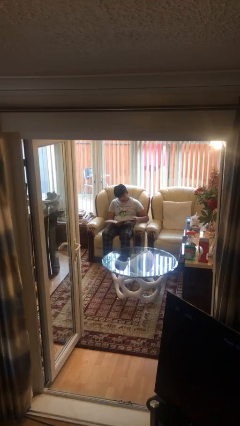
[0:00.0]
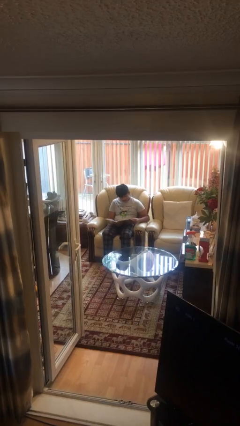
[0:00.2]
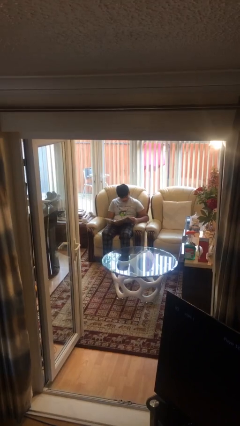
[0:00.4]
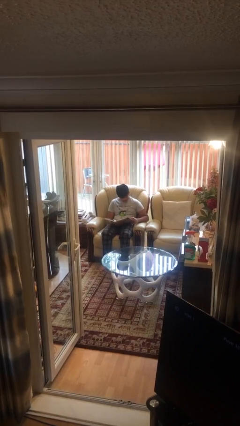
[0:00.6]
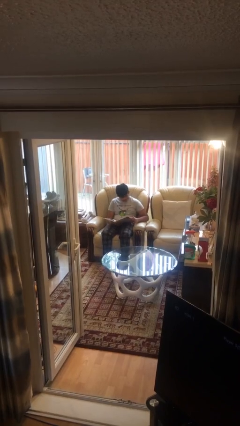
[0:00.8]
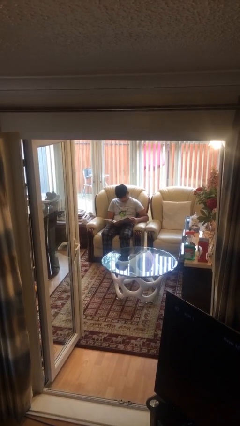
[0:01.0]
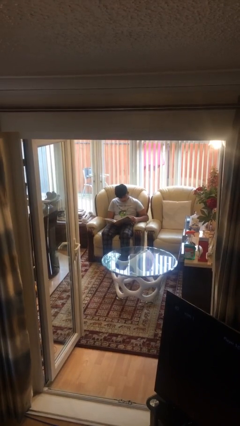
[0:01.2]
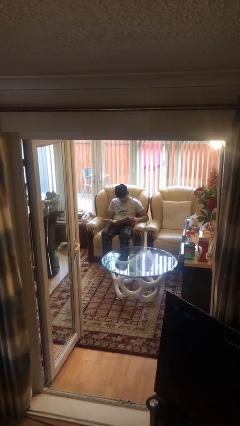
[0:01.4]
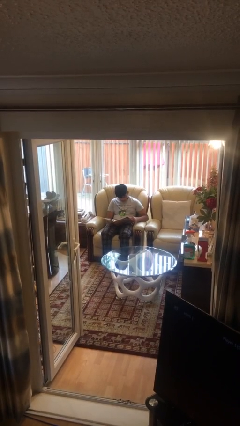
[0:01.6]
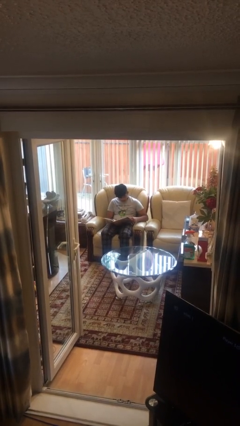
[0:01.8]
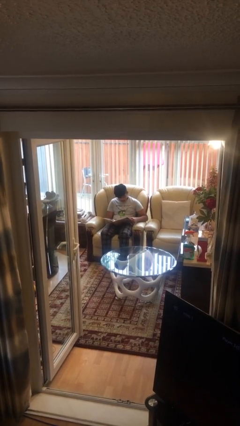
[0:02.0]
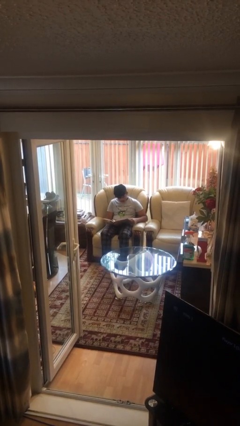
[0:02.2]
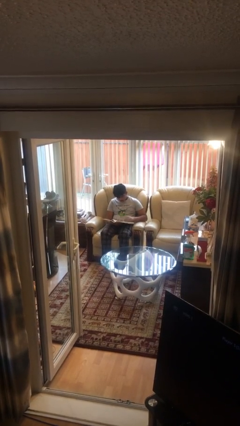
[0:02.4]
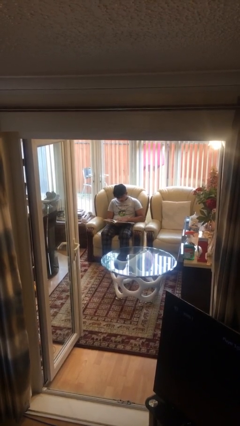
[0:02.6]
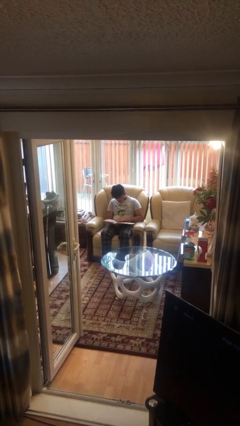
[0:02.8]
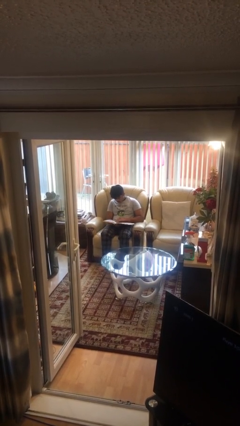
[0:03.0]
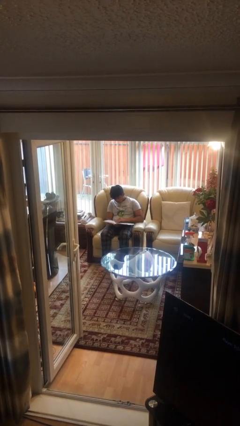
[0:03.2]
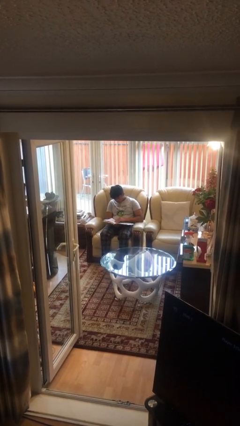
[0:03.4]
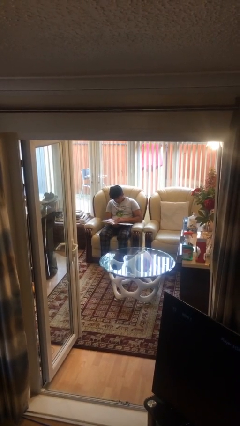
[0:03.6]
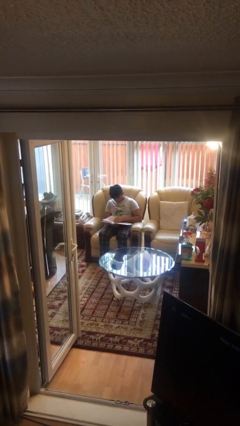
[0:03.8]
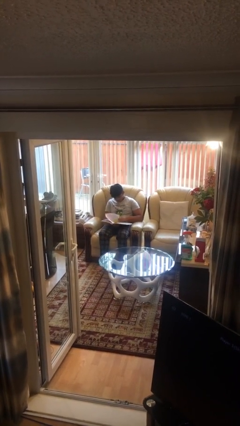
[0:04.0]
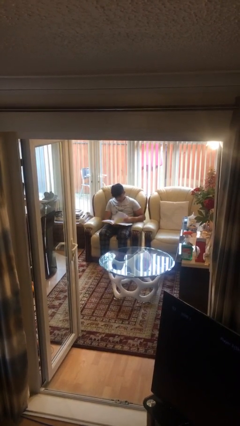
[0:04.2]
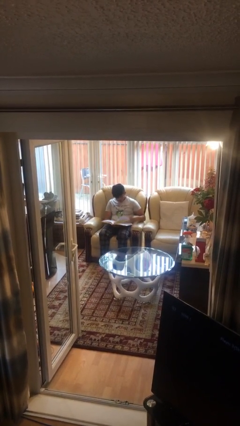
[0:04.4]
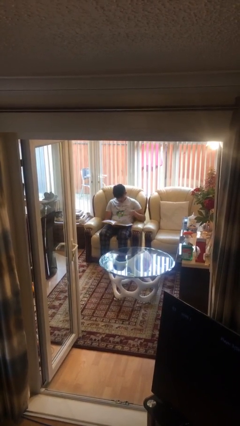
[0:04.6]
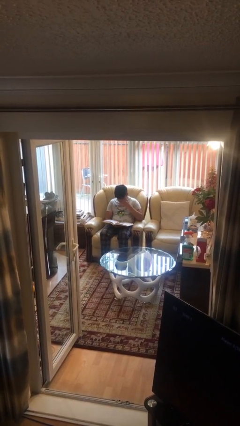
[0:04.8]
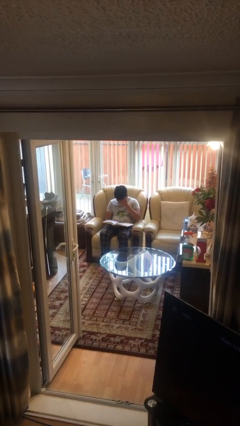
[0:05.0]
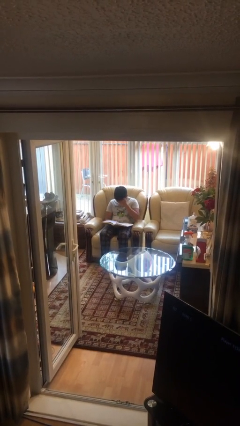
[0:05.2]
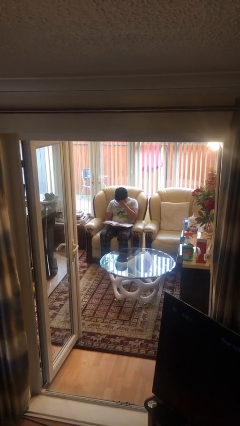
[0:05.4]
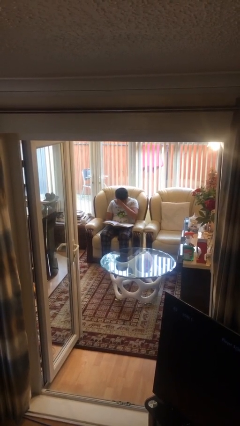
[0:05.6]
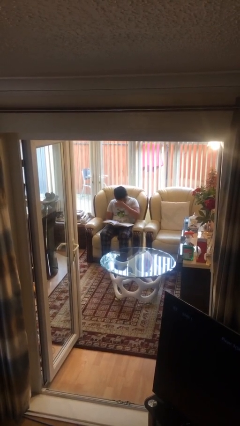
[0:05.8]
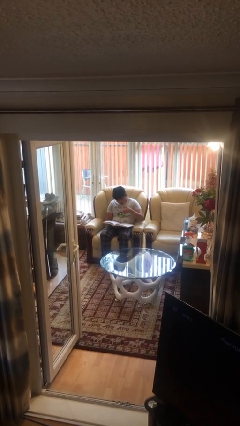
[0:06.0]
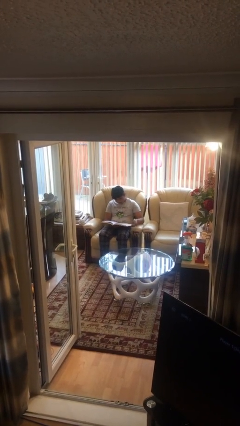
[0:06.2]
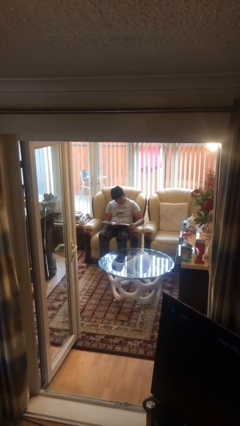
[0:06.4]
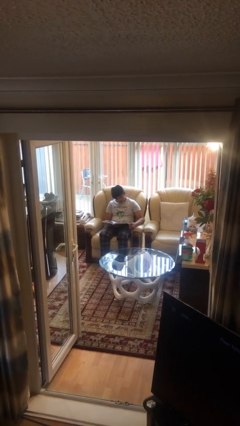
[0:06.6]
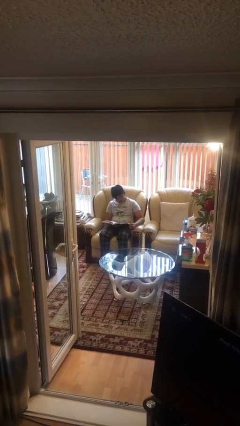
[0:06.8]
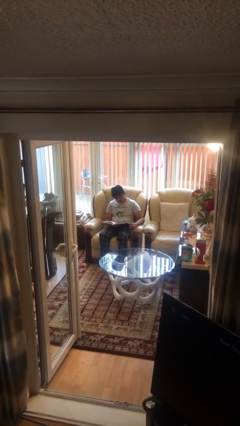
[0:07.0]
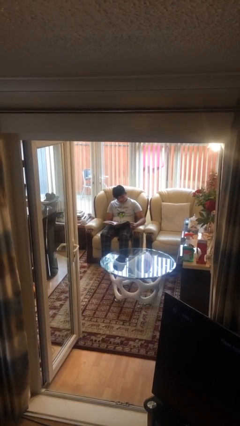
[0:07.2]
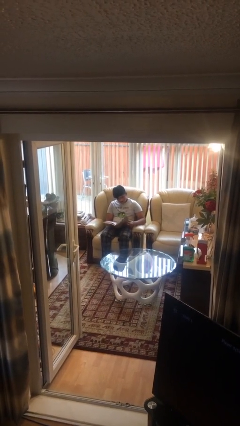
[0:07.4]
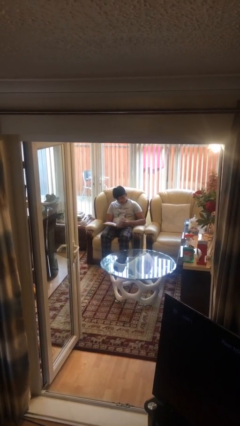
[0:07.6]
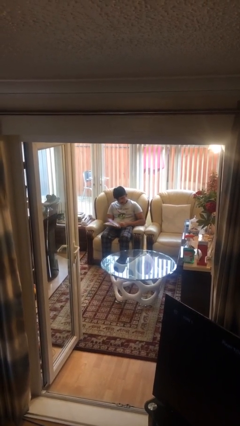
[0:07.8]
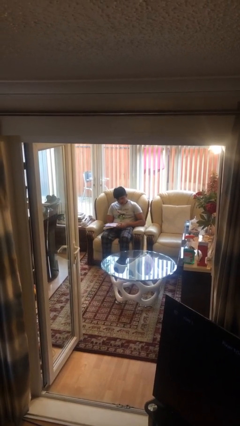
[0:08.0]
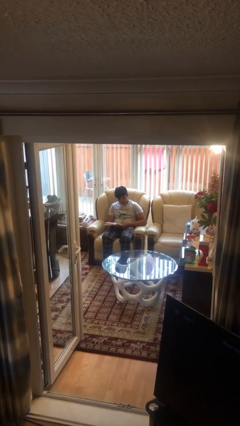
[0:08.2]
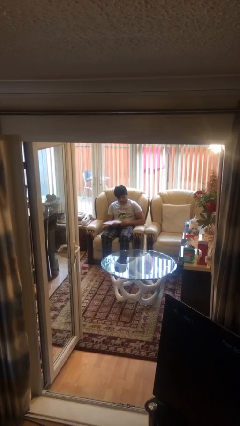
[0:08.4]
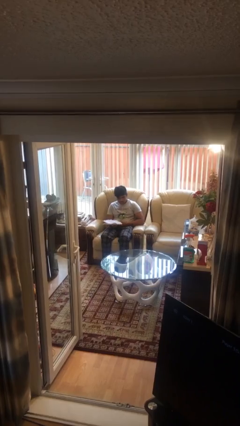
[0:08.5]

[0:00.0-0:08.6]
person reads document

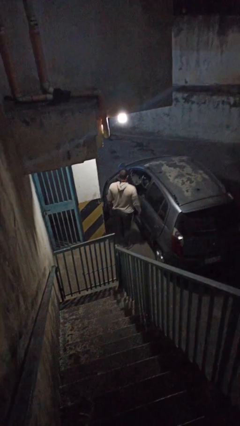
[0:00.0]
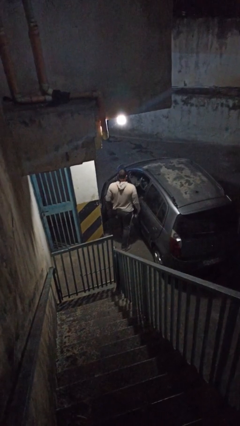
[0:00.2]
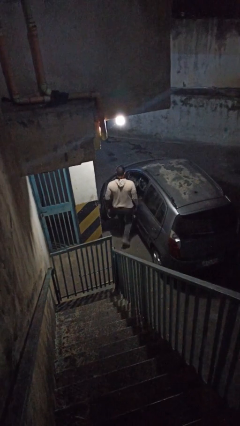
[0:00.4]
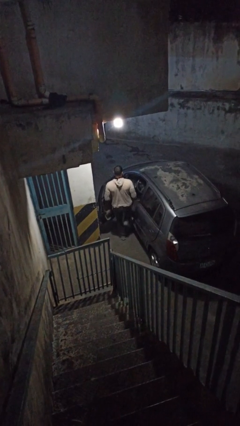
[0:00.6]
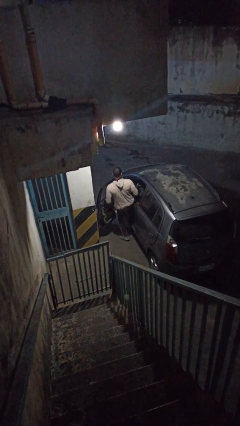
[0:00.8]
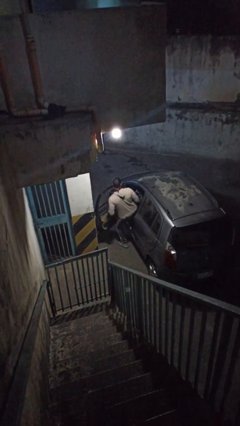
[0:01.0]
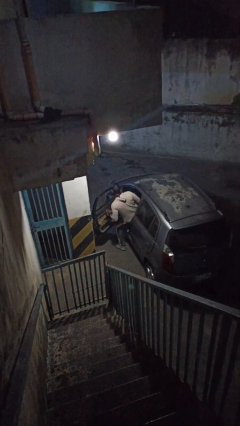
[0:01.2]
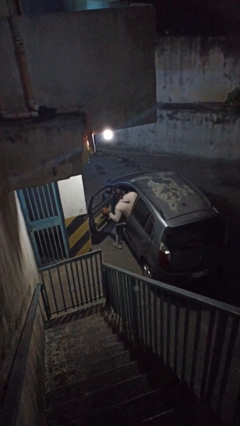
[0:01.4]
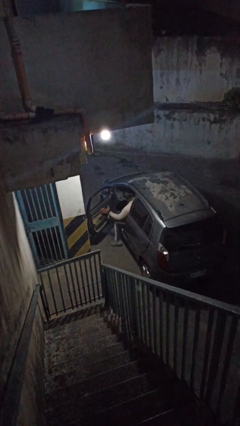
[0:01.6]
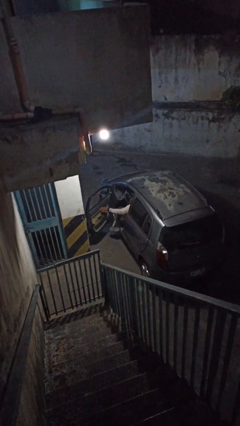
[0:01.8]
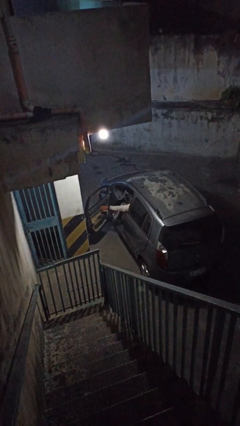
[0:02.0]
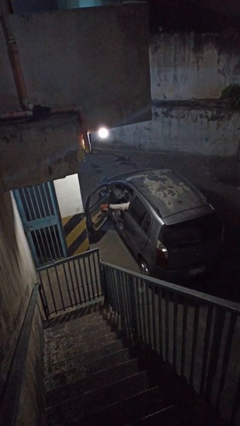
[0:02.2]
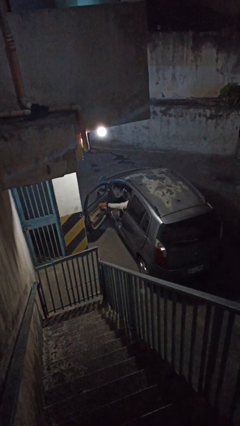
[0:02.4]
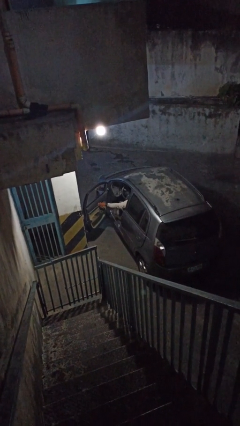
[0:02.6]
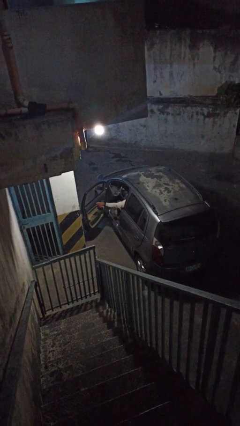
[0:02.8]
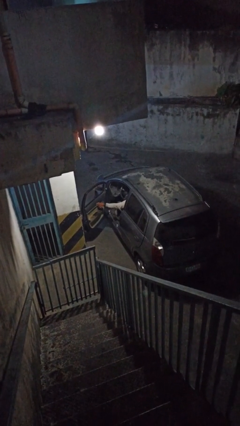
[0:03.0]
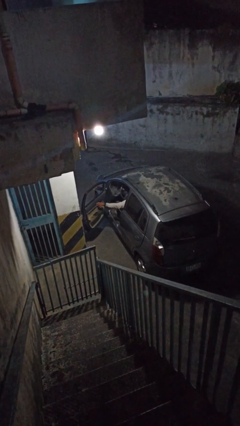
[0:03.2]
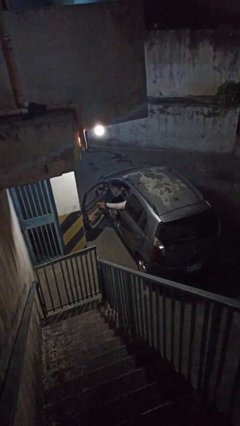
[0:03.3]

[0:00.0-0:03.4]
person enters car

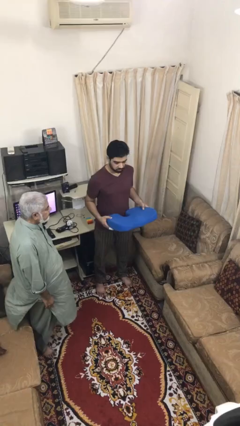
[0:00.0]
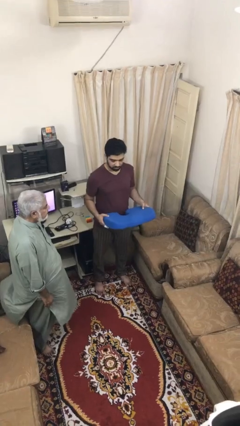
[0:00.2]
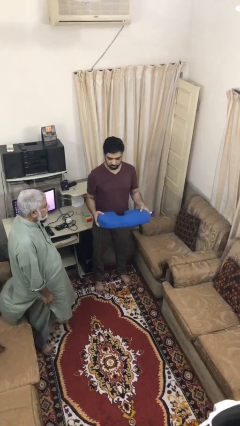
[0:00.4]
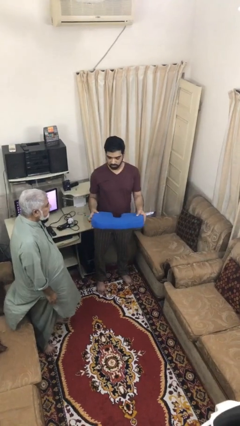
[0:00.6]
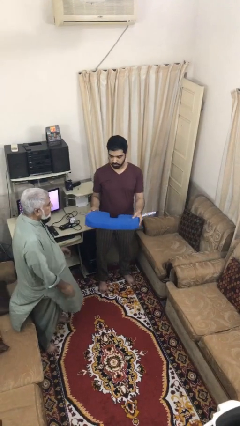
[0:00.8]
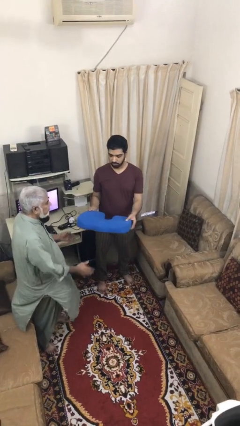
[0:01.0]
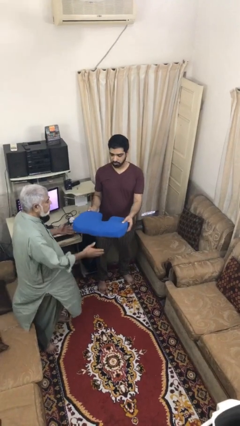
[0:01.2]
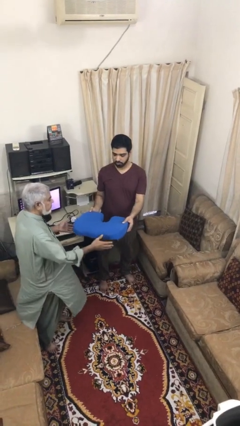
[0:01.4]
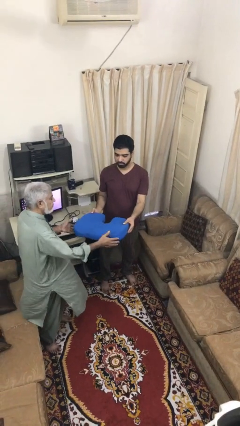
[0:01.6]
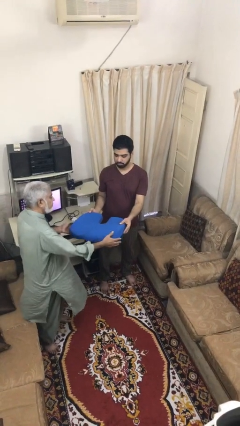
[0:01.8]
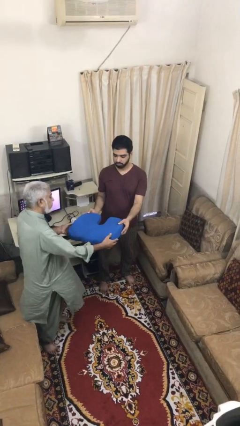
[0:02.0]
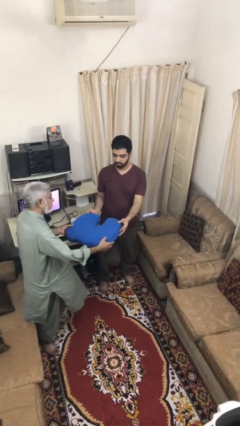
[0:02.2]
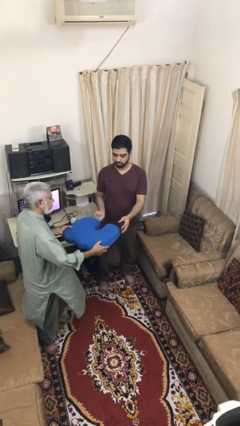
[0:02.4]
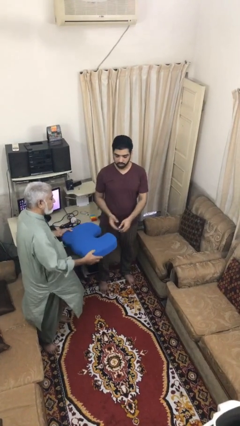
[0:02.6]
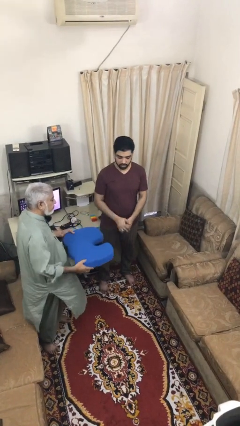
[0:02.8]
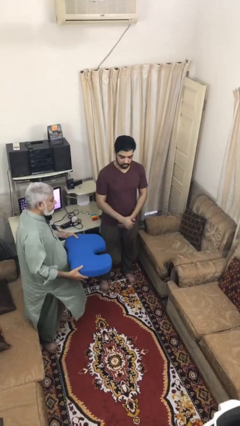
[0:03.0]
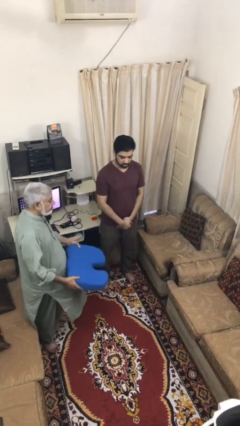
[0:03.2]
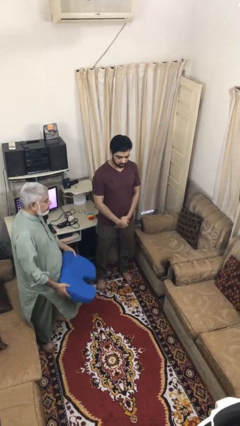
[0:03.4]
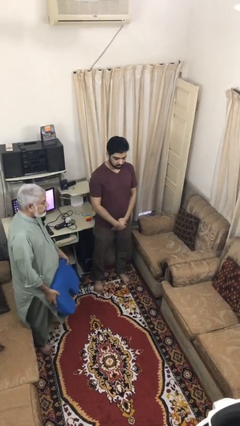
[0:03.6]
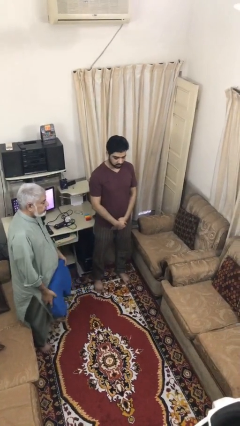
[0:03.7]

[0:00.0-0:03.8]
person transfers object to person

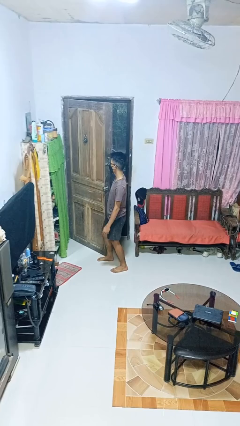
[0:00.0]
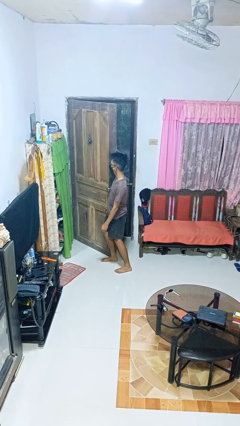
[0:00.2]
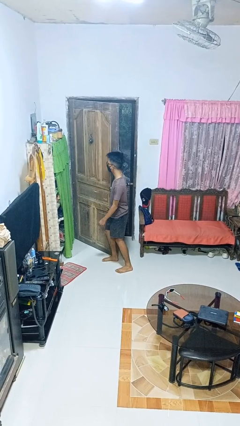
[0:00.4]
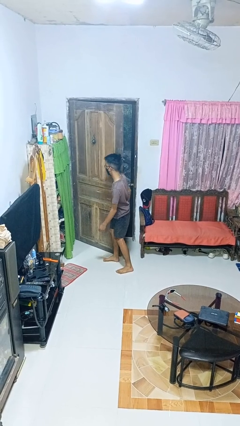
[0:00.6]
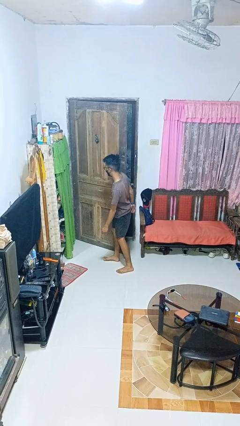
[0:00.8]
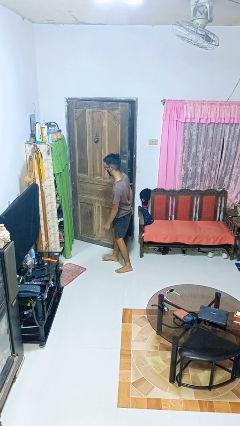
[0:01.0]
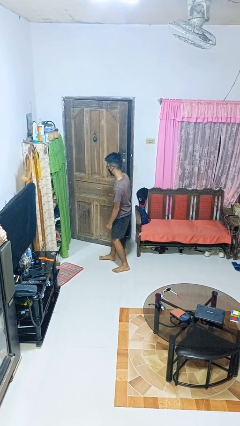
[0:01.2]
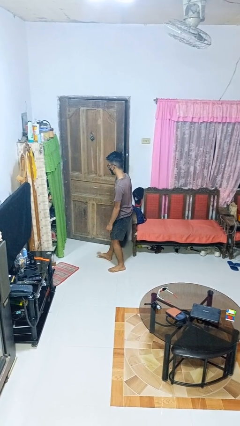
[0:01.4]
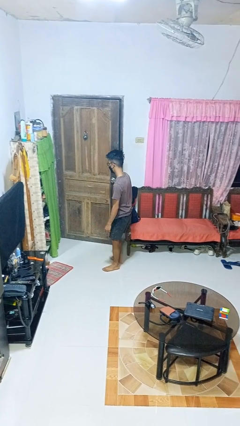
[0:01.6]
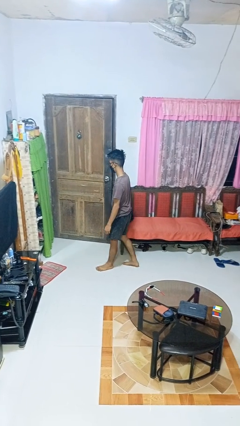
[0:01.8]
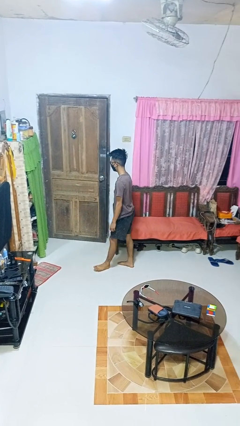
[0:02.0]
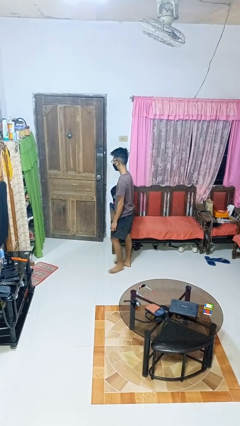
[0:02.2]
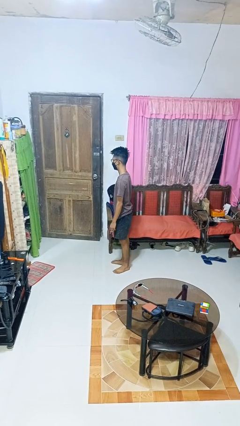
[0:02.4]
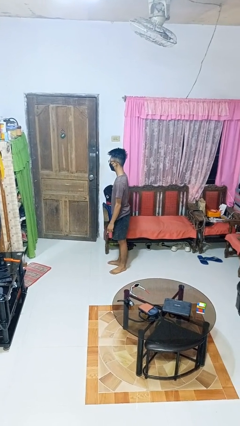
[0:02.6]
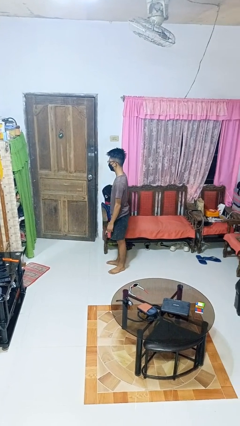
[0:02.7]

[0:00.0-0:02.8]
person closes door with hip
